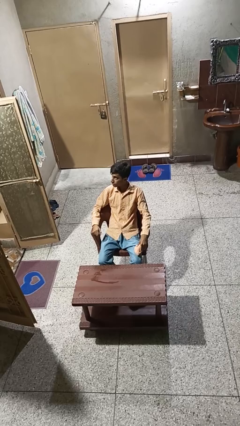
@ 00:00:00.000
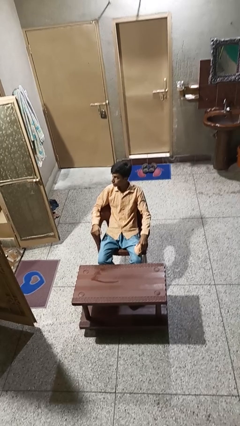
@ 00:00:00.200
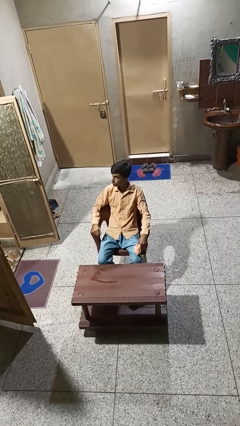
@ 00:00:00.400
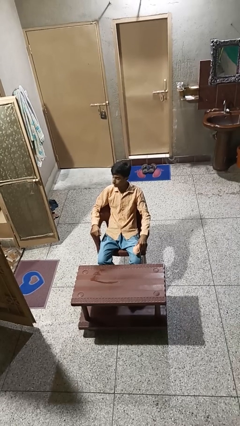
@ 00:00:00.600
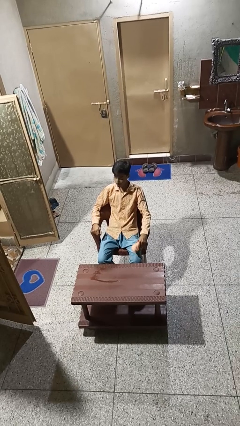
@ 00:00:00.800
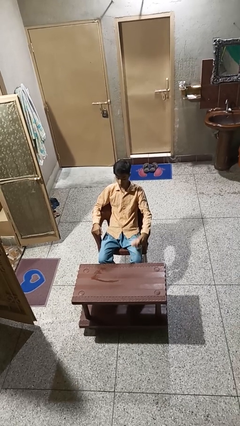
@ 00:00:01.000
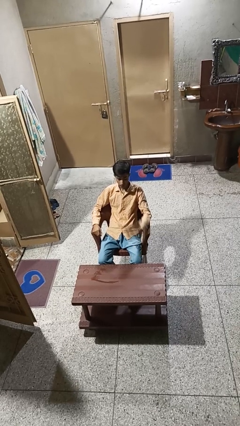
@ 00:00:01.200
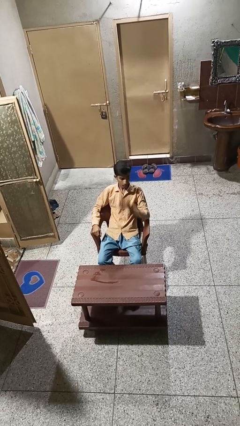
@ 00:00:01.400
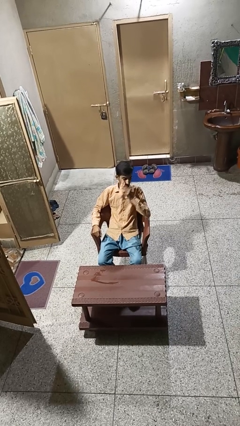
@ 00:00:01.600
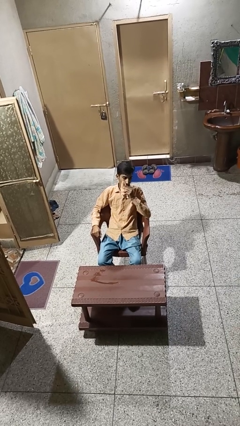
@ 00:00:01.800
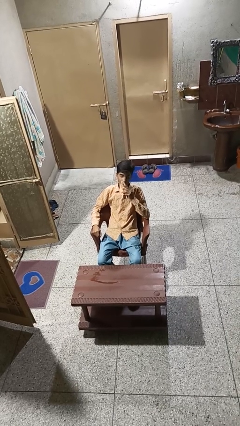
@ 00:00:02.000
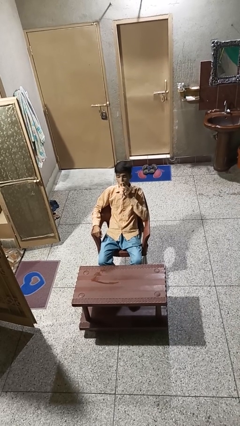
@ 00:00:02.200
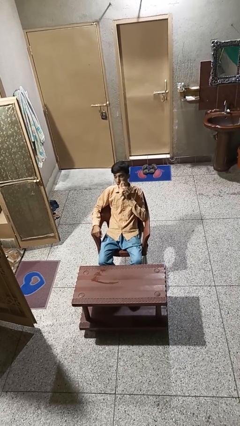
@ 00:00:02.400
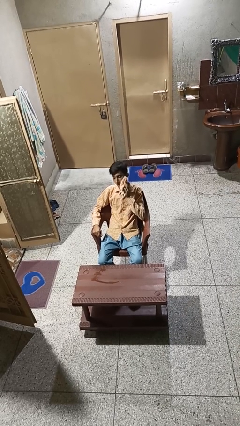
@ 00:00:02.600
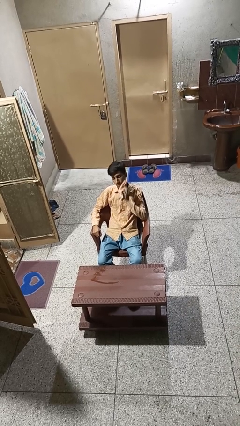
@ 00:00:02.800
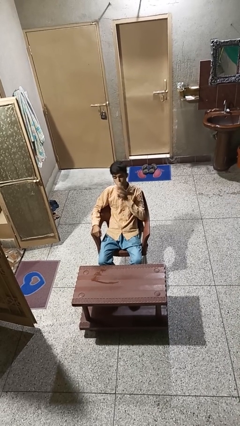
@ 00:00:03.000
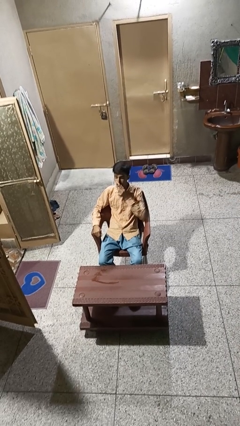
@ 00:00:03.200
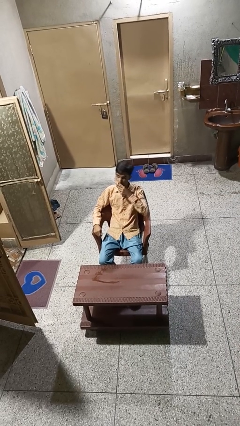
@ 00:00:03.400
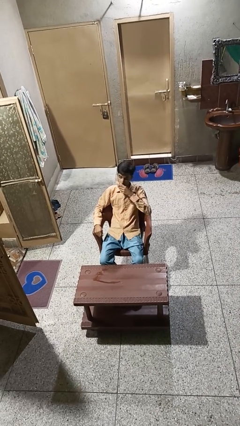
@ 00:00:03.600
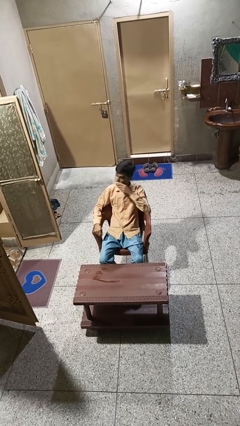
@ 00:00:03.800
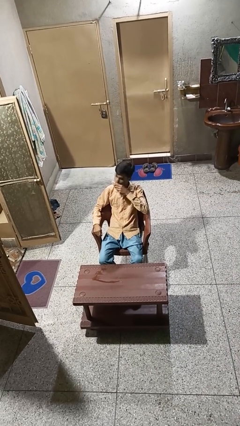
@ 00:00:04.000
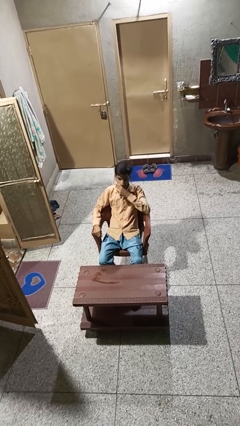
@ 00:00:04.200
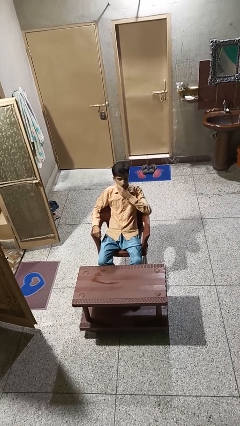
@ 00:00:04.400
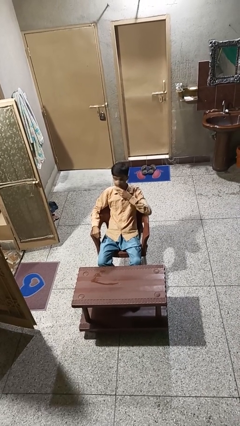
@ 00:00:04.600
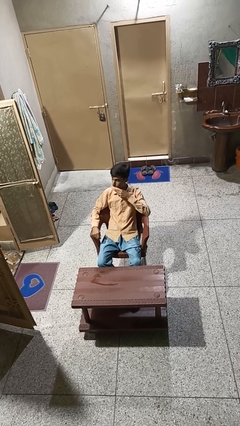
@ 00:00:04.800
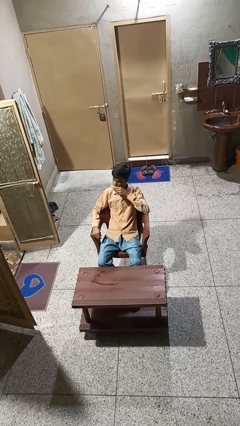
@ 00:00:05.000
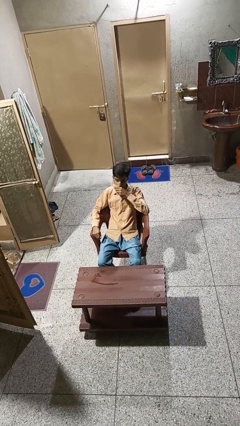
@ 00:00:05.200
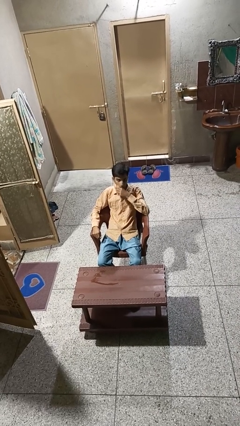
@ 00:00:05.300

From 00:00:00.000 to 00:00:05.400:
person wipes mouth with napkin

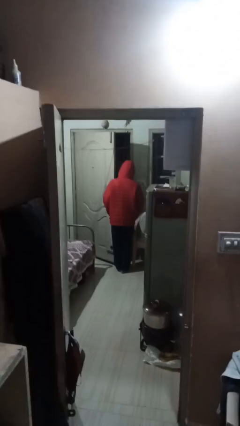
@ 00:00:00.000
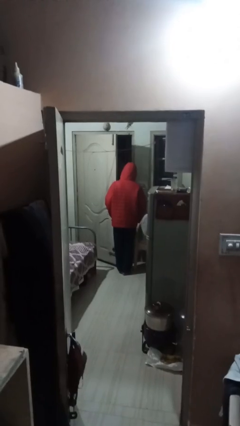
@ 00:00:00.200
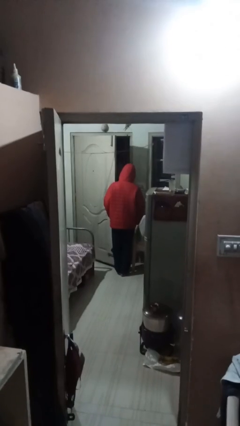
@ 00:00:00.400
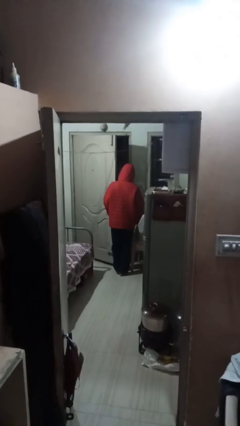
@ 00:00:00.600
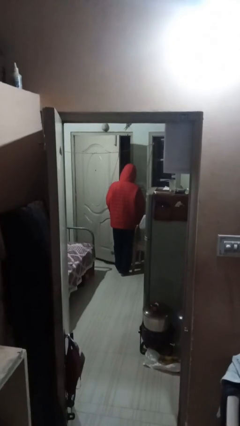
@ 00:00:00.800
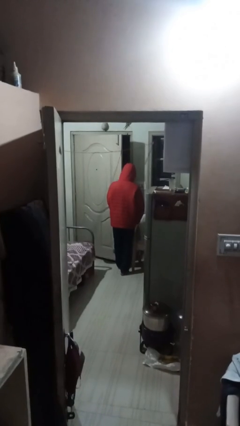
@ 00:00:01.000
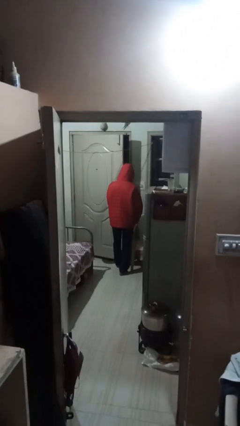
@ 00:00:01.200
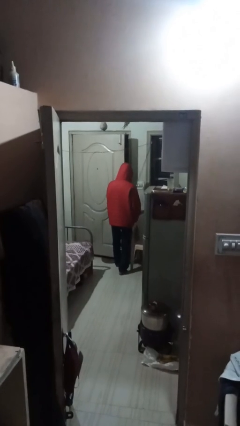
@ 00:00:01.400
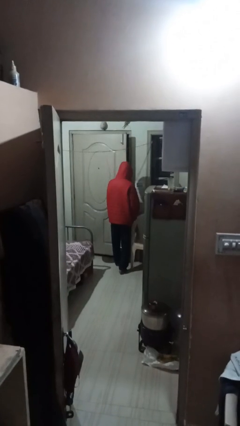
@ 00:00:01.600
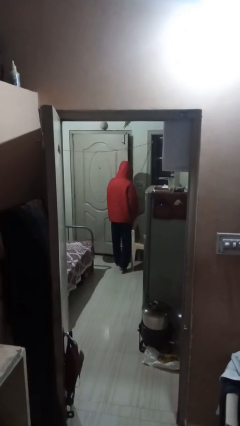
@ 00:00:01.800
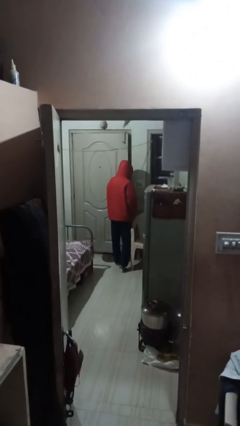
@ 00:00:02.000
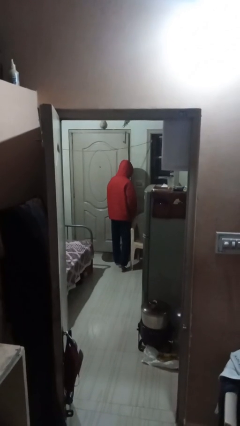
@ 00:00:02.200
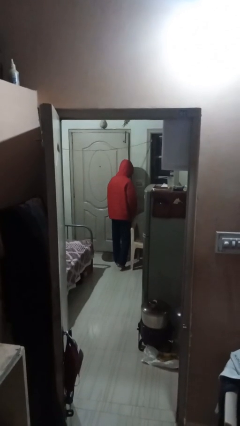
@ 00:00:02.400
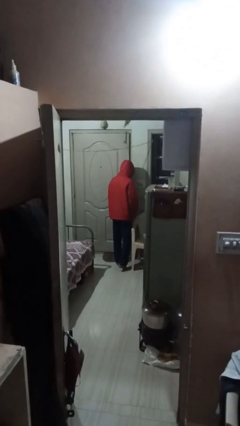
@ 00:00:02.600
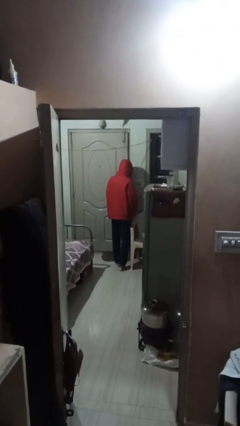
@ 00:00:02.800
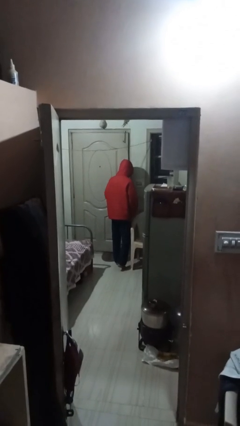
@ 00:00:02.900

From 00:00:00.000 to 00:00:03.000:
person closes facility door

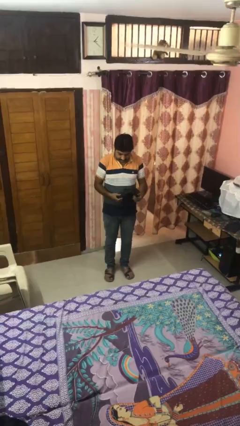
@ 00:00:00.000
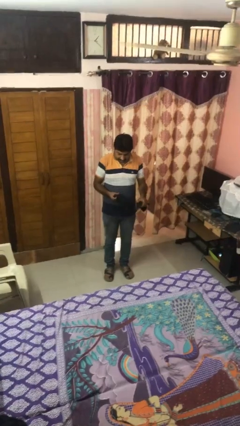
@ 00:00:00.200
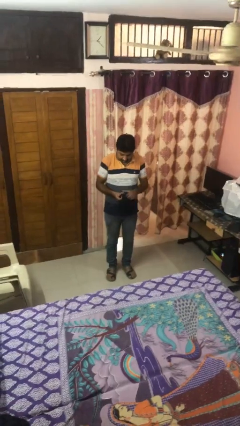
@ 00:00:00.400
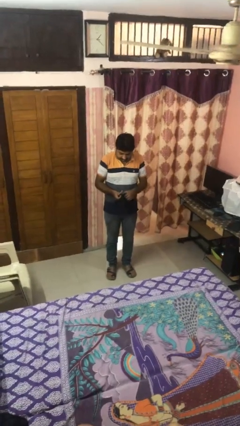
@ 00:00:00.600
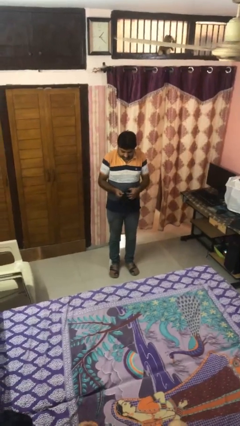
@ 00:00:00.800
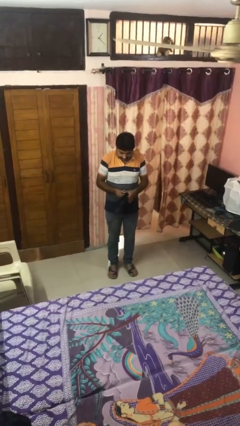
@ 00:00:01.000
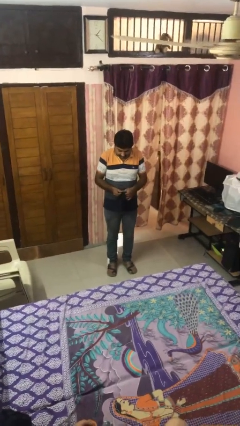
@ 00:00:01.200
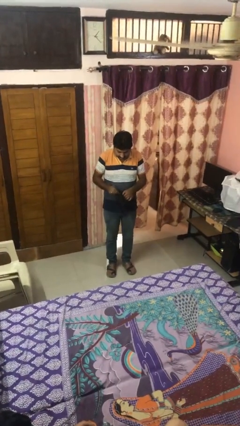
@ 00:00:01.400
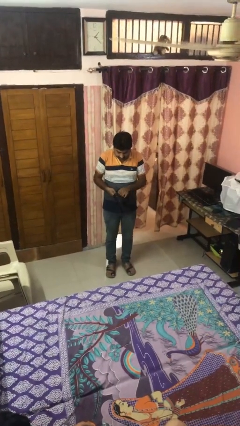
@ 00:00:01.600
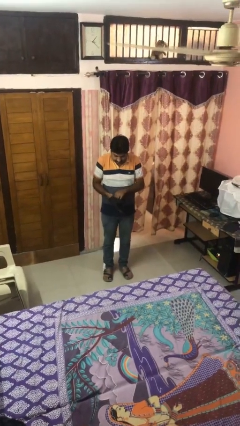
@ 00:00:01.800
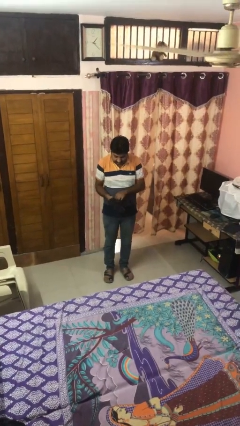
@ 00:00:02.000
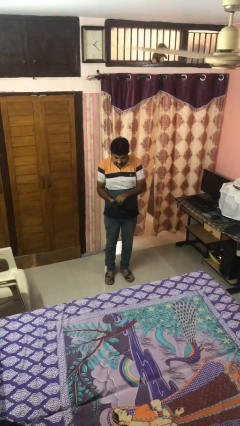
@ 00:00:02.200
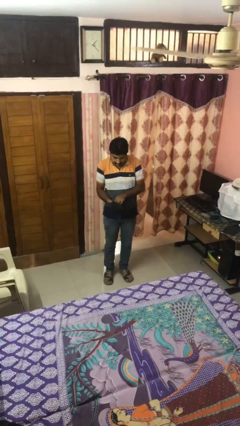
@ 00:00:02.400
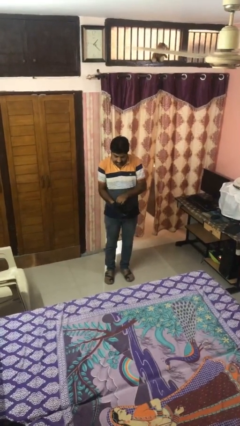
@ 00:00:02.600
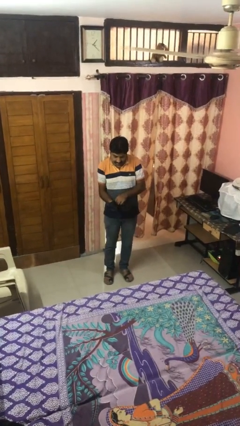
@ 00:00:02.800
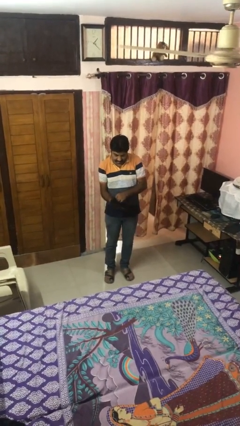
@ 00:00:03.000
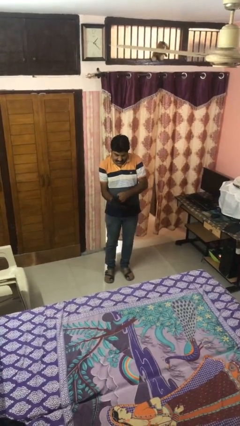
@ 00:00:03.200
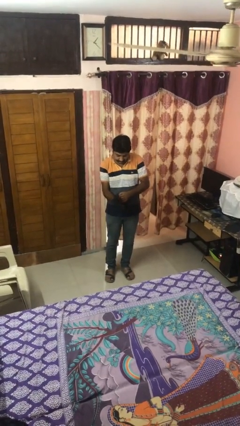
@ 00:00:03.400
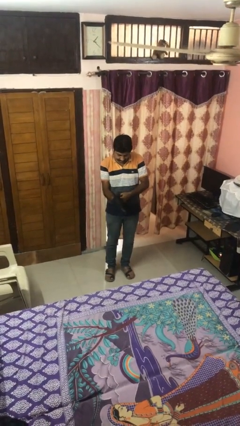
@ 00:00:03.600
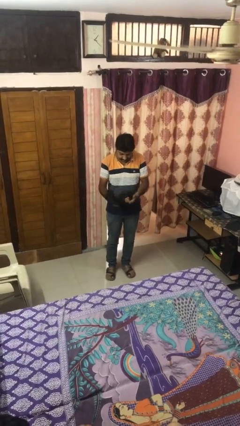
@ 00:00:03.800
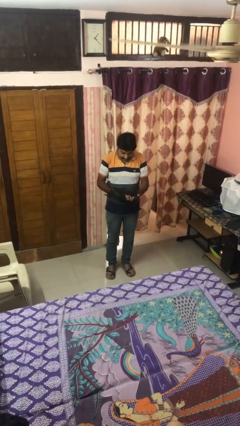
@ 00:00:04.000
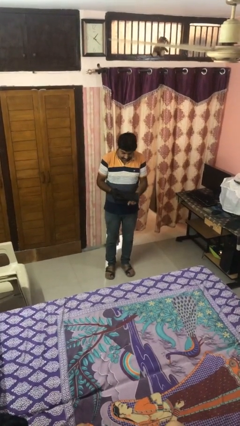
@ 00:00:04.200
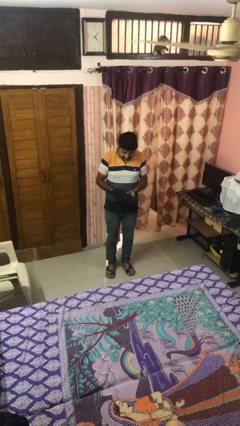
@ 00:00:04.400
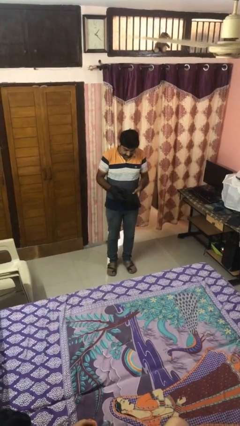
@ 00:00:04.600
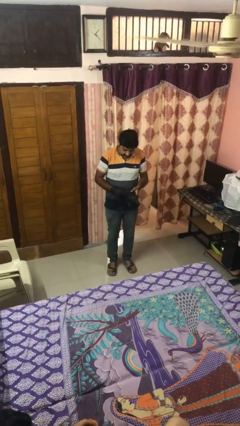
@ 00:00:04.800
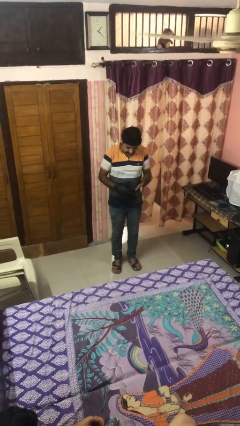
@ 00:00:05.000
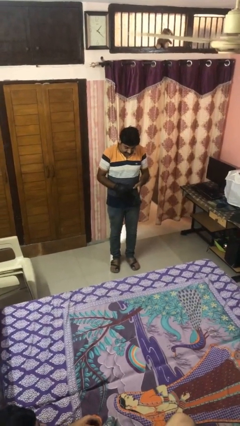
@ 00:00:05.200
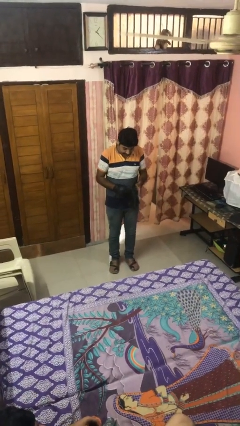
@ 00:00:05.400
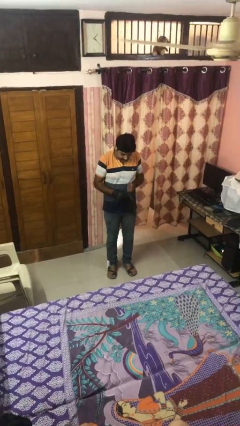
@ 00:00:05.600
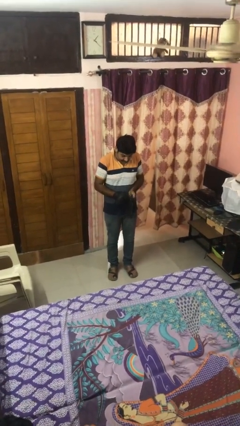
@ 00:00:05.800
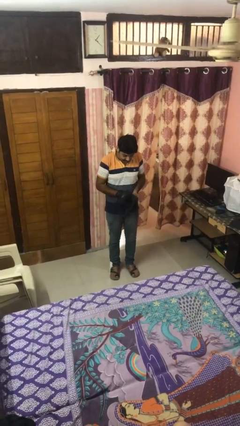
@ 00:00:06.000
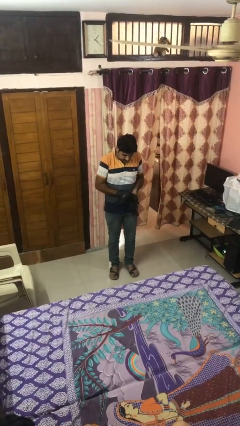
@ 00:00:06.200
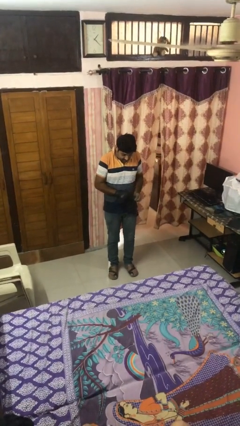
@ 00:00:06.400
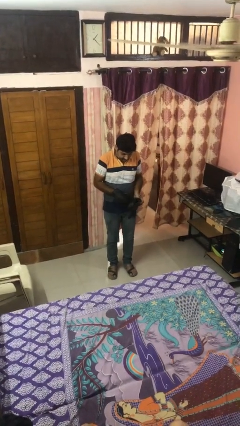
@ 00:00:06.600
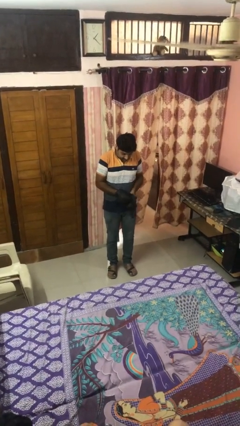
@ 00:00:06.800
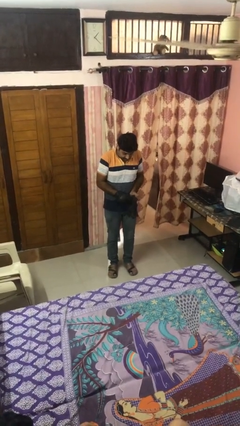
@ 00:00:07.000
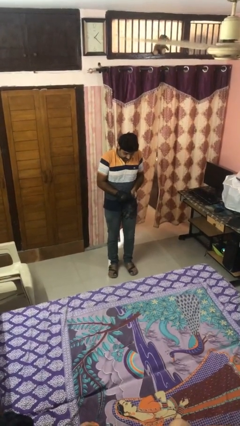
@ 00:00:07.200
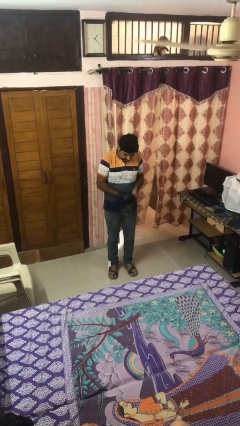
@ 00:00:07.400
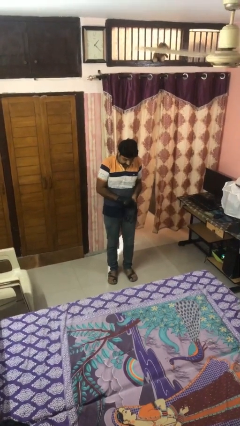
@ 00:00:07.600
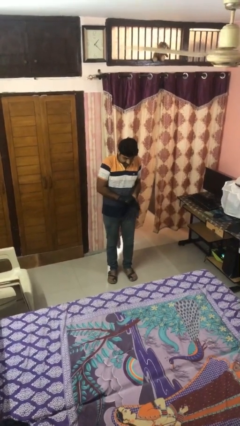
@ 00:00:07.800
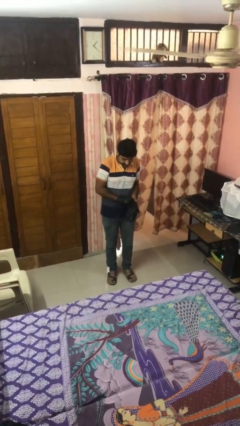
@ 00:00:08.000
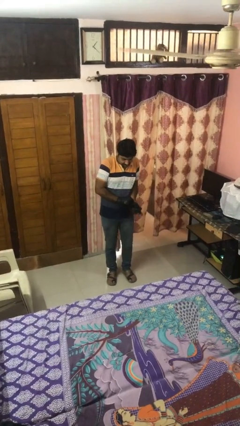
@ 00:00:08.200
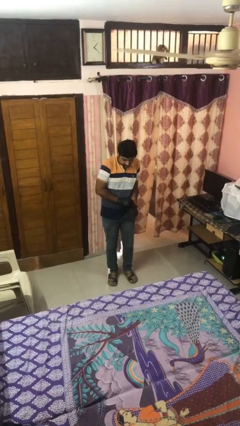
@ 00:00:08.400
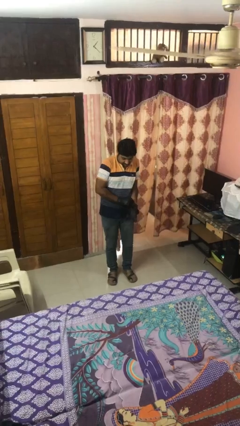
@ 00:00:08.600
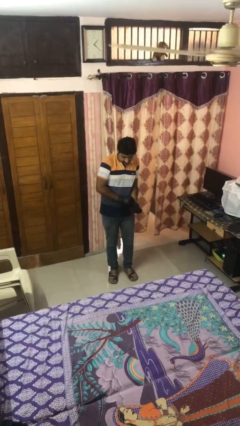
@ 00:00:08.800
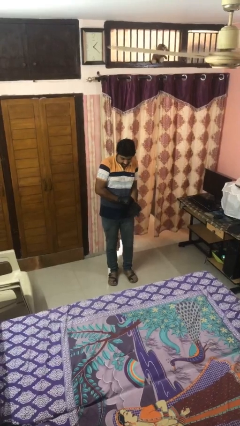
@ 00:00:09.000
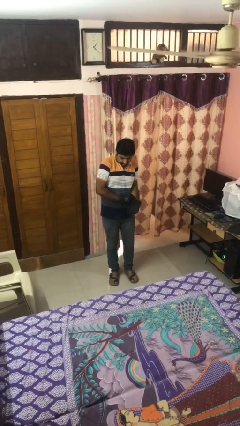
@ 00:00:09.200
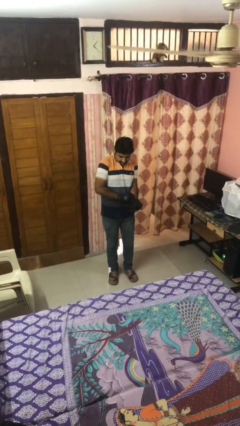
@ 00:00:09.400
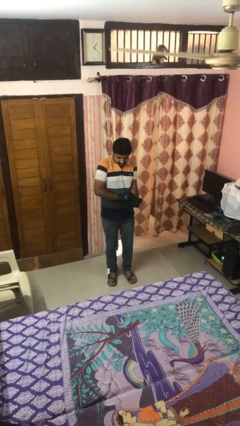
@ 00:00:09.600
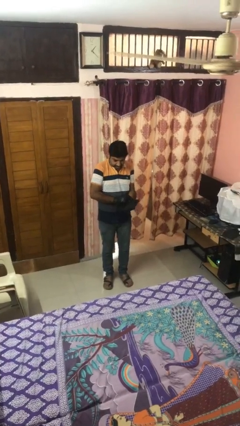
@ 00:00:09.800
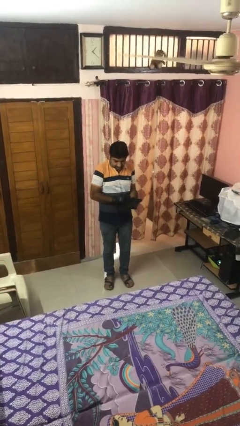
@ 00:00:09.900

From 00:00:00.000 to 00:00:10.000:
person puts on gloves
